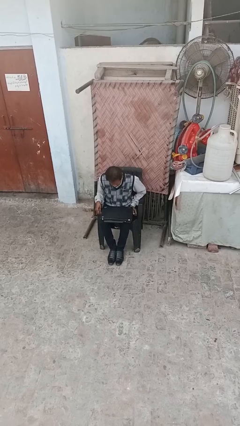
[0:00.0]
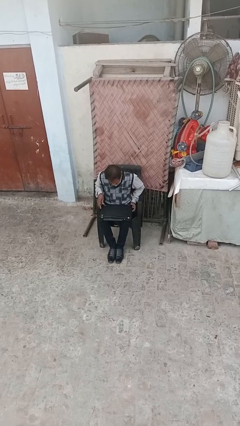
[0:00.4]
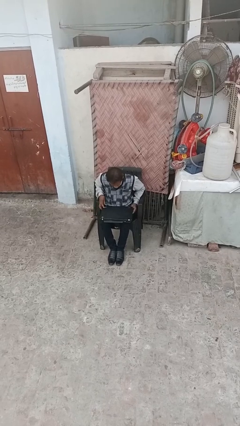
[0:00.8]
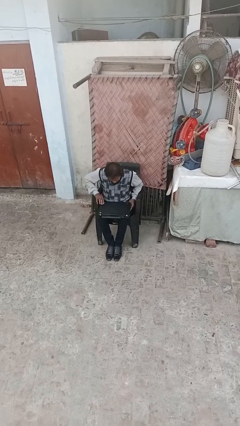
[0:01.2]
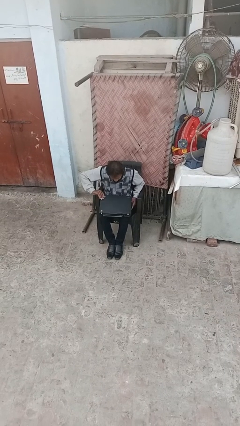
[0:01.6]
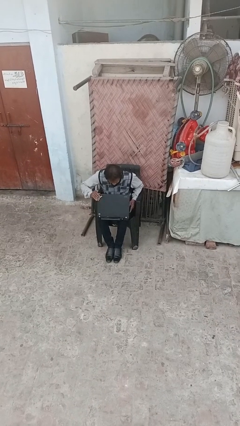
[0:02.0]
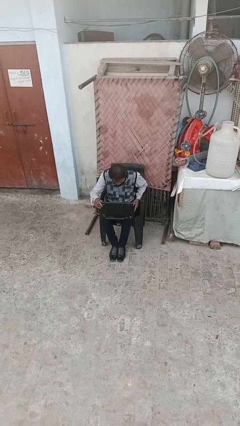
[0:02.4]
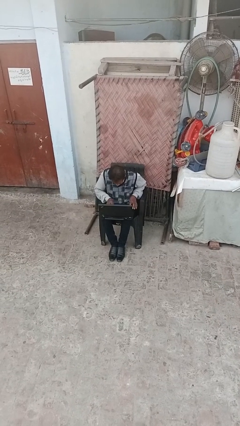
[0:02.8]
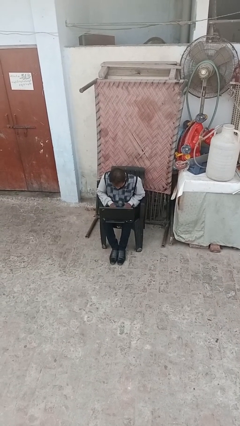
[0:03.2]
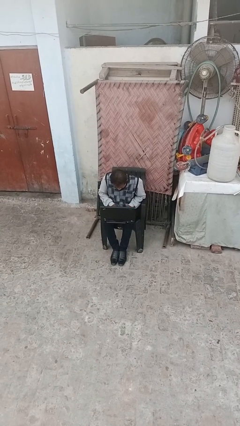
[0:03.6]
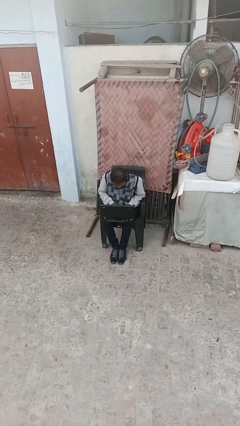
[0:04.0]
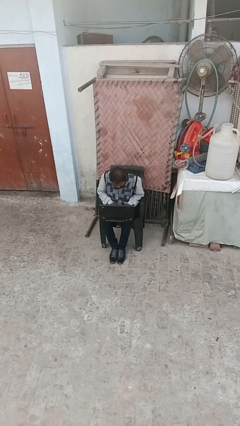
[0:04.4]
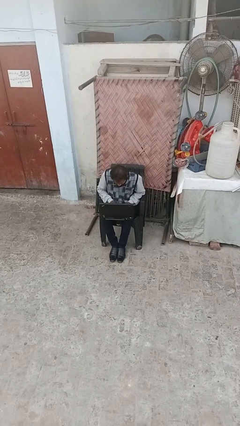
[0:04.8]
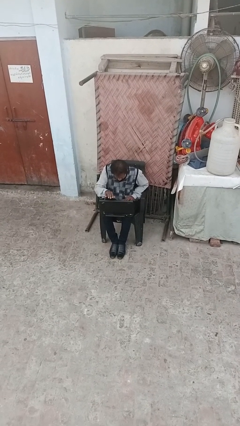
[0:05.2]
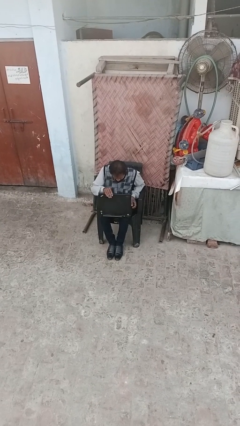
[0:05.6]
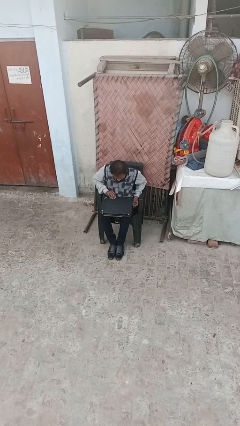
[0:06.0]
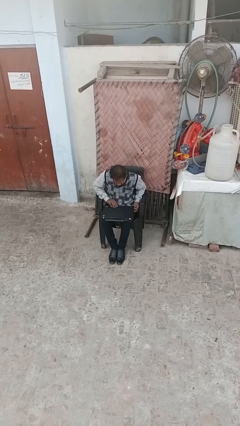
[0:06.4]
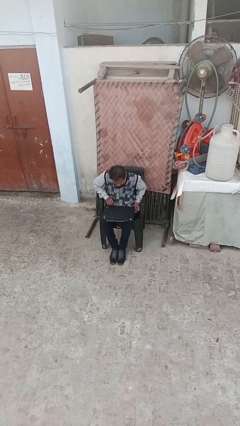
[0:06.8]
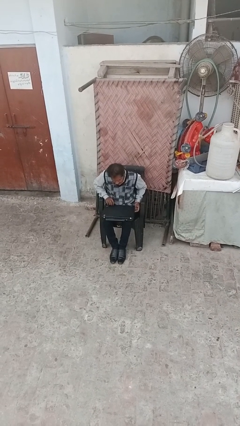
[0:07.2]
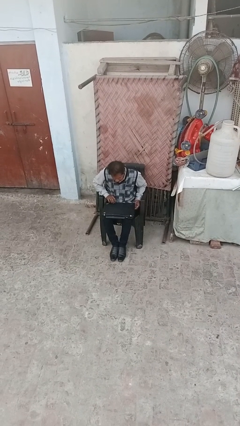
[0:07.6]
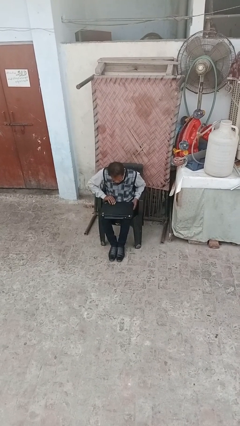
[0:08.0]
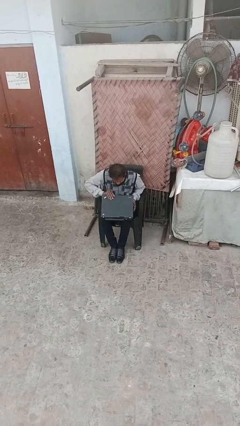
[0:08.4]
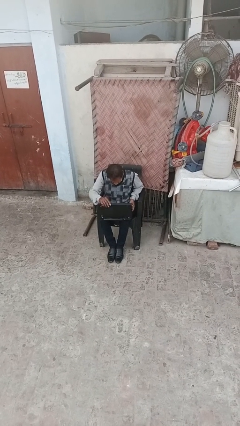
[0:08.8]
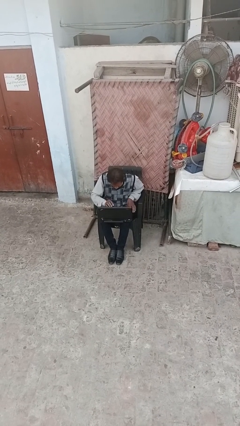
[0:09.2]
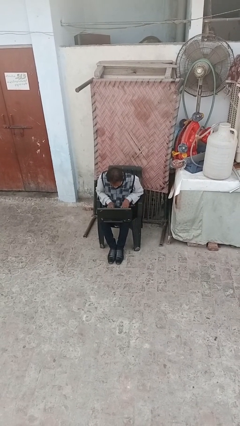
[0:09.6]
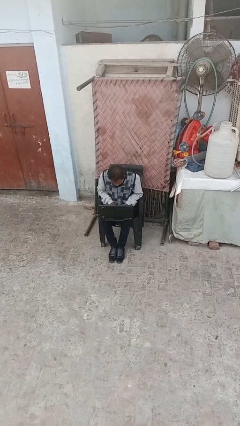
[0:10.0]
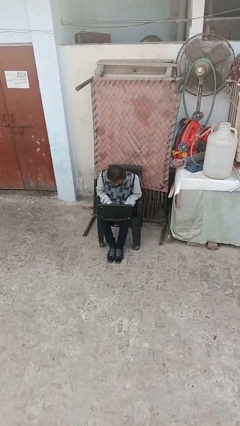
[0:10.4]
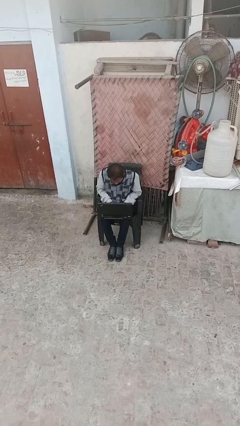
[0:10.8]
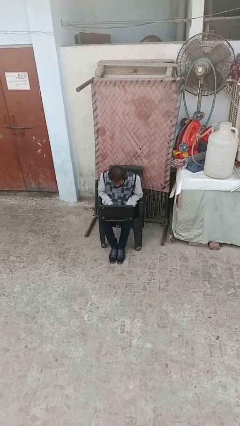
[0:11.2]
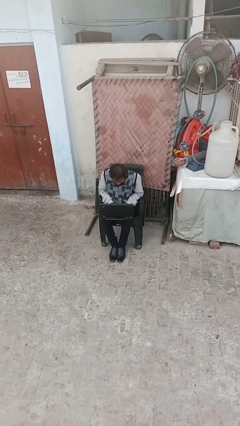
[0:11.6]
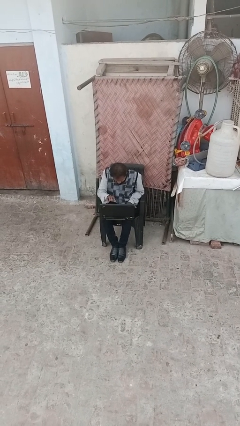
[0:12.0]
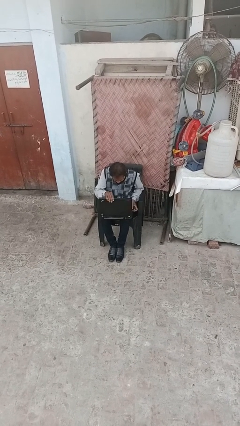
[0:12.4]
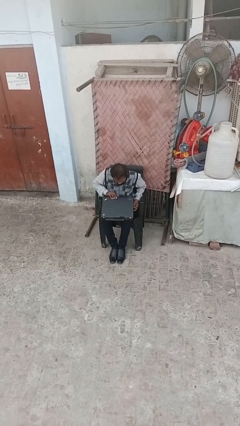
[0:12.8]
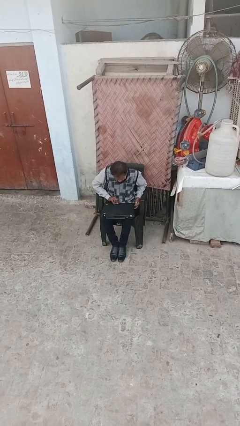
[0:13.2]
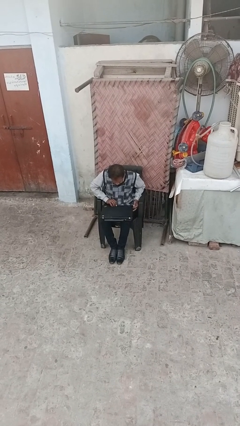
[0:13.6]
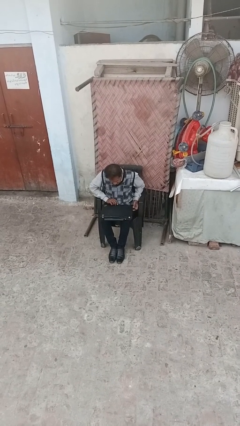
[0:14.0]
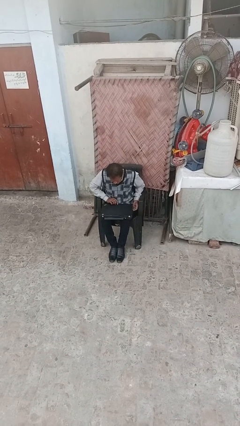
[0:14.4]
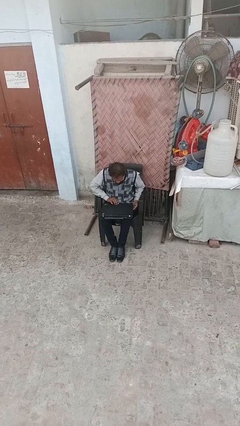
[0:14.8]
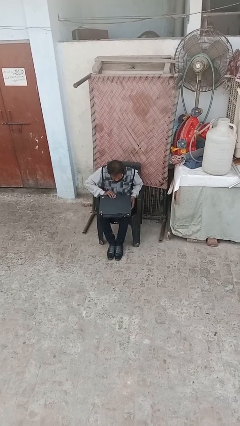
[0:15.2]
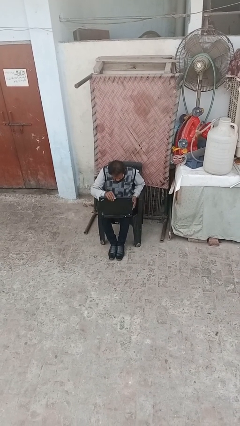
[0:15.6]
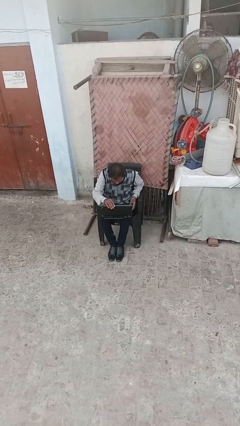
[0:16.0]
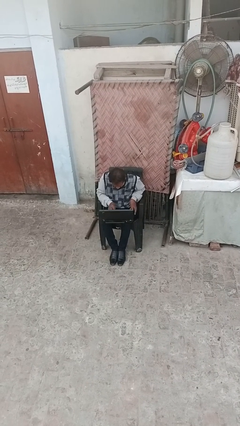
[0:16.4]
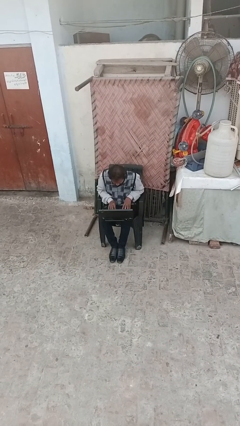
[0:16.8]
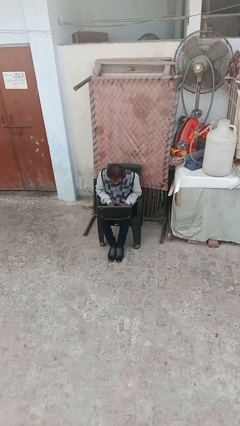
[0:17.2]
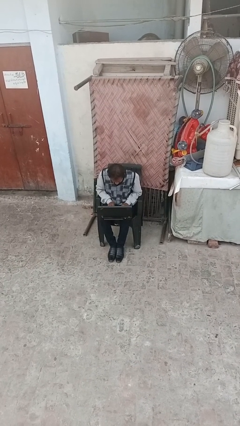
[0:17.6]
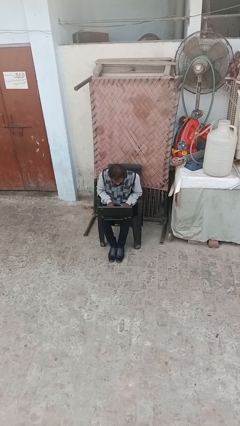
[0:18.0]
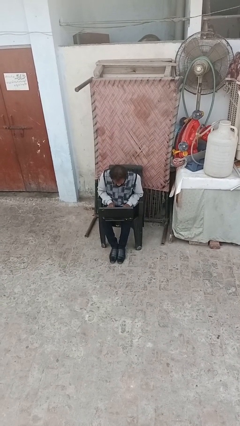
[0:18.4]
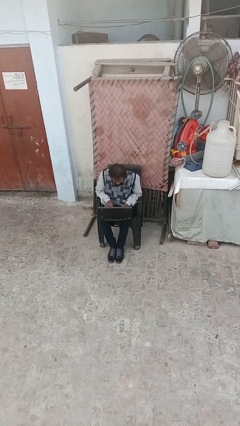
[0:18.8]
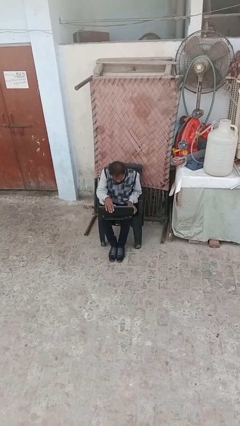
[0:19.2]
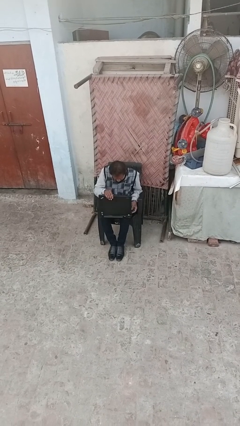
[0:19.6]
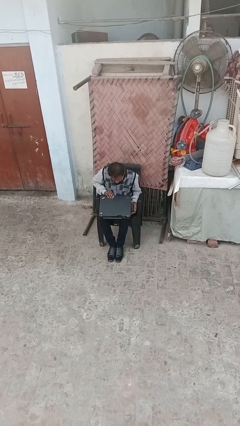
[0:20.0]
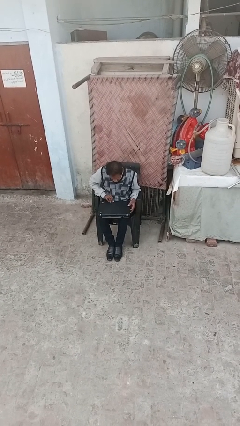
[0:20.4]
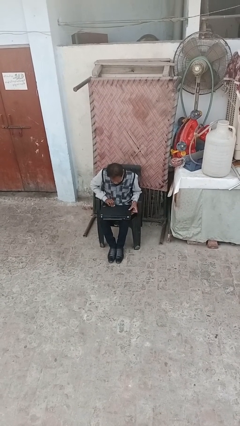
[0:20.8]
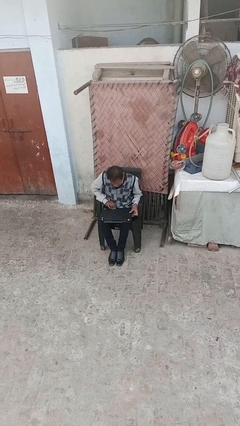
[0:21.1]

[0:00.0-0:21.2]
person interacts with laptop

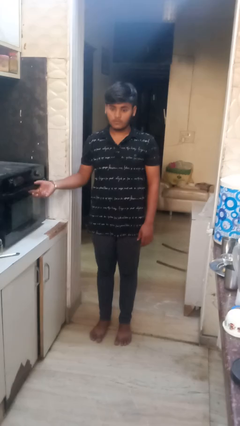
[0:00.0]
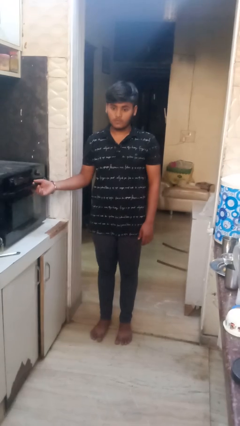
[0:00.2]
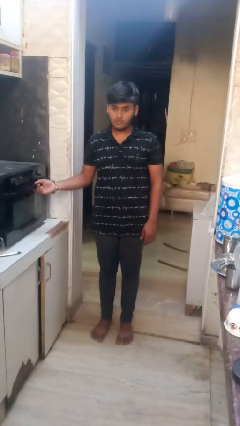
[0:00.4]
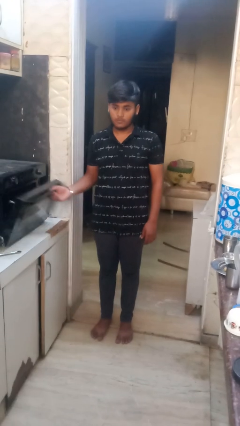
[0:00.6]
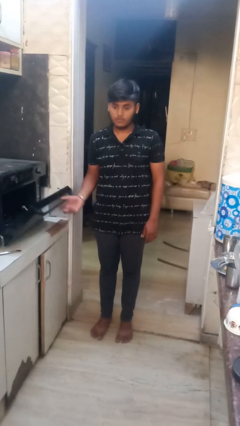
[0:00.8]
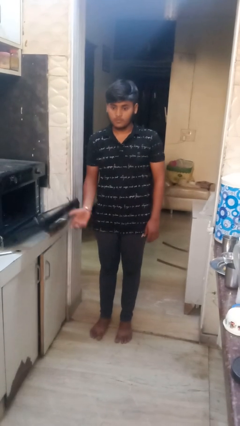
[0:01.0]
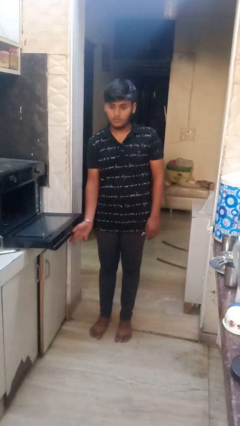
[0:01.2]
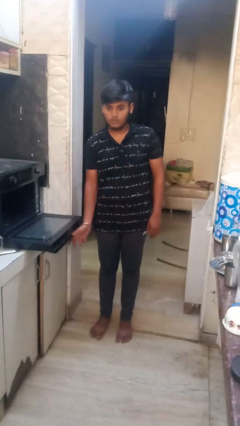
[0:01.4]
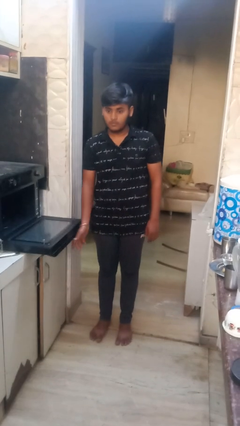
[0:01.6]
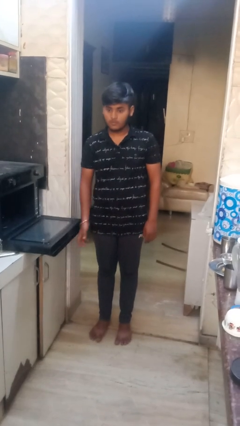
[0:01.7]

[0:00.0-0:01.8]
person opens oven door

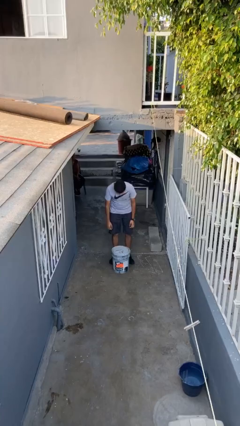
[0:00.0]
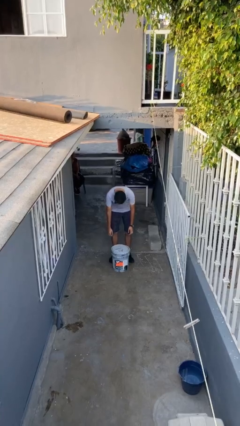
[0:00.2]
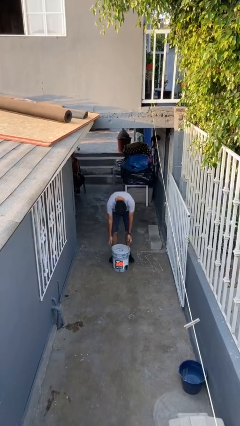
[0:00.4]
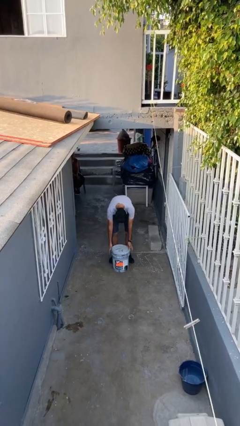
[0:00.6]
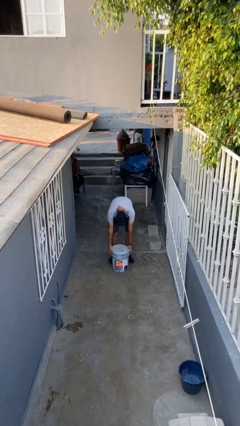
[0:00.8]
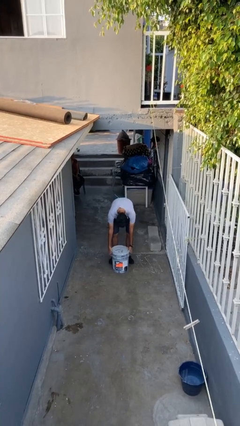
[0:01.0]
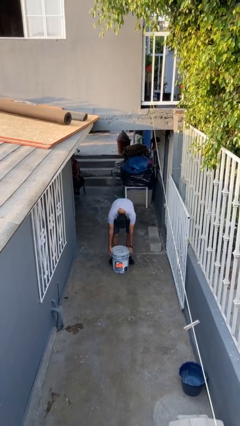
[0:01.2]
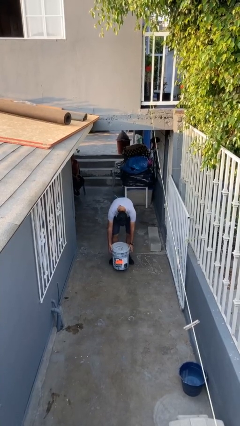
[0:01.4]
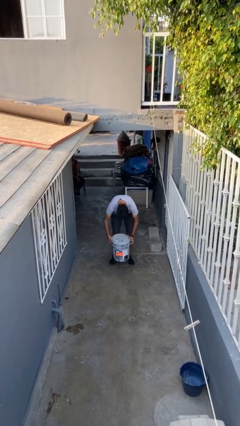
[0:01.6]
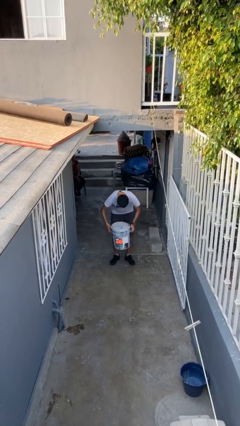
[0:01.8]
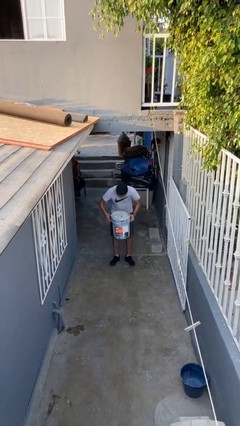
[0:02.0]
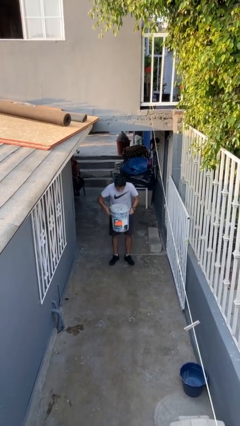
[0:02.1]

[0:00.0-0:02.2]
person picks up object from floor

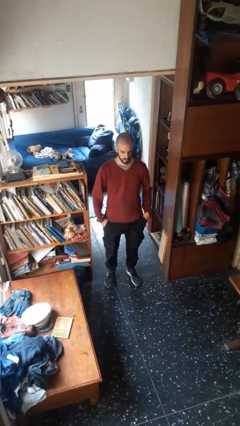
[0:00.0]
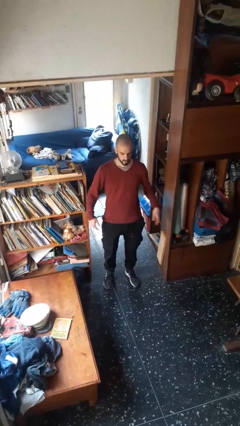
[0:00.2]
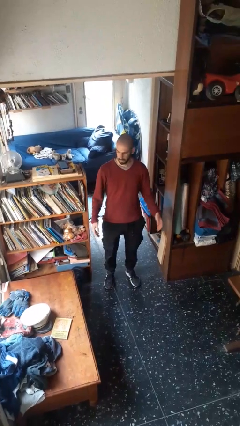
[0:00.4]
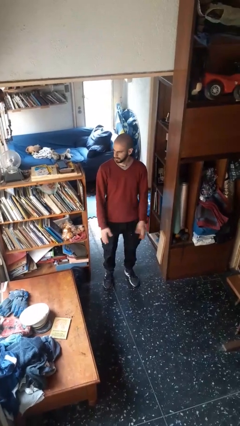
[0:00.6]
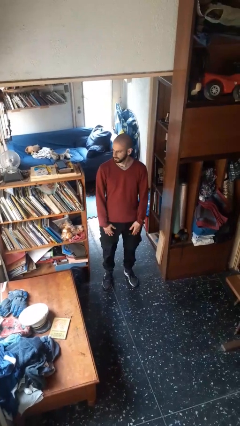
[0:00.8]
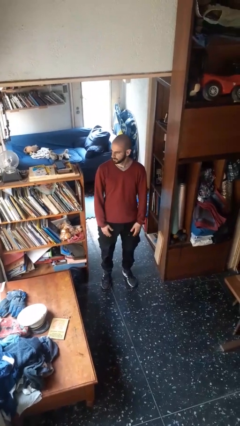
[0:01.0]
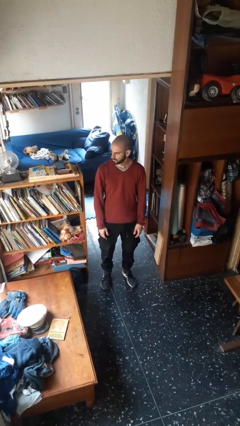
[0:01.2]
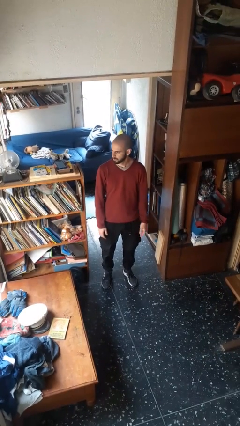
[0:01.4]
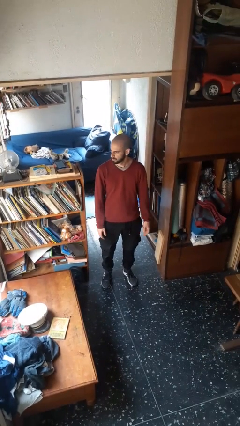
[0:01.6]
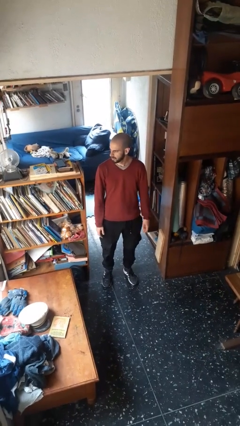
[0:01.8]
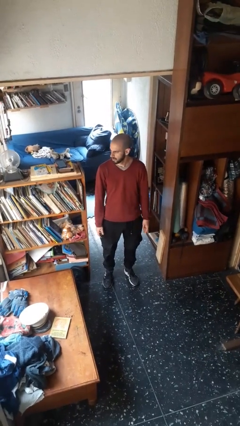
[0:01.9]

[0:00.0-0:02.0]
person puts hands in back pockets

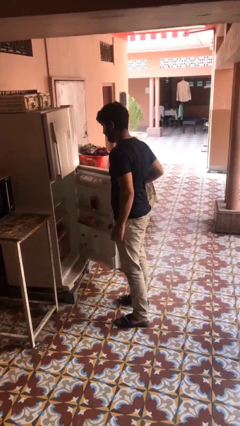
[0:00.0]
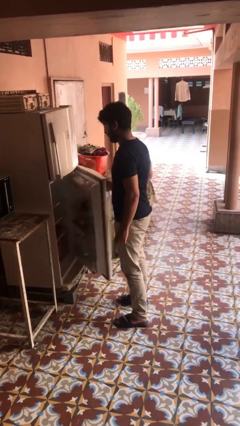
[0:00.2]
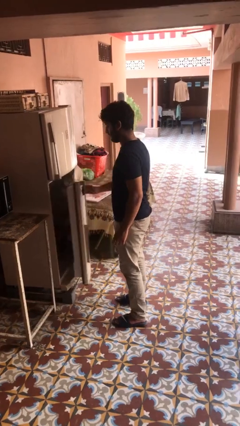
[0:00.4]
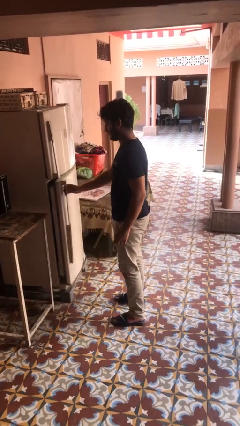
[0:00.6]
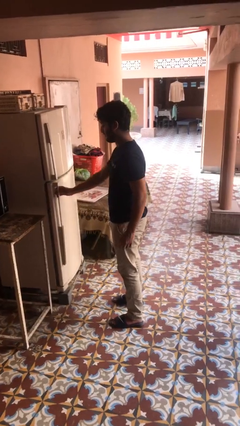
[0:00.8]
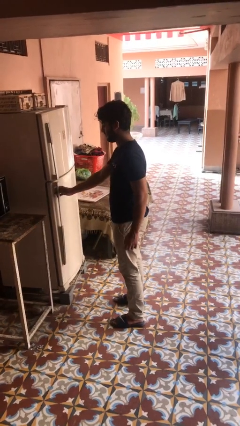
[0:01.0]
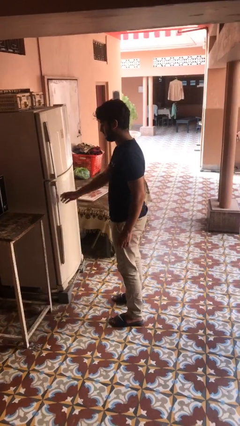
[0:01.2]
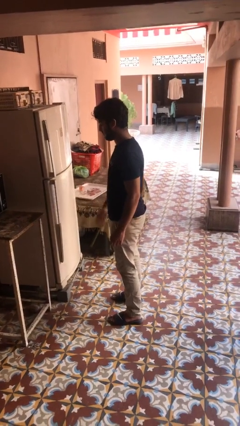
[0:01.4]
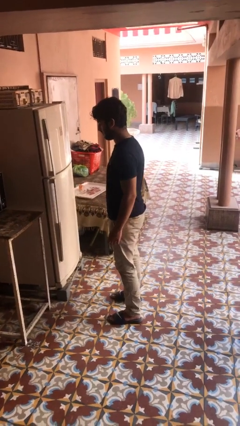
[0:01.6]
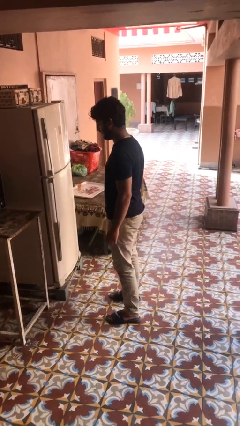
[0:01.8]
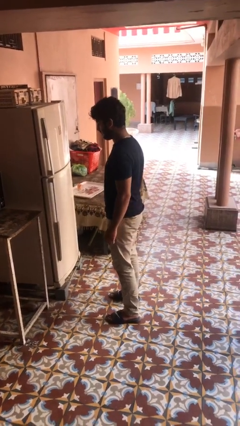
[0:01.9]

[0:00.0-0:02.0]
person closes refrigerator
